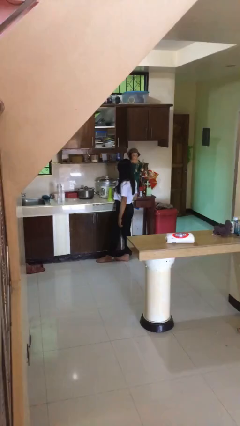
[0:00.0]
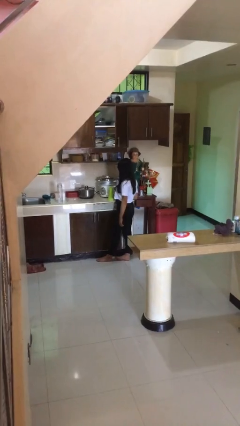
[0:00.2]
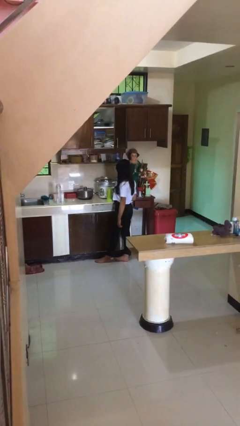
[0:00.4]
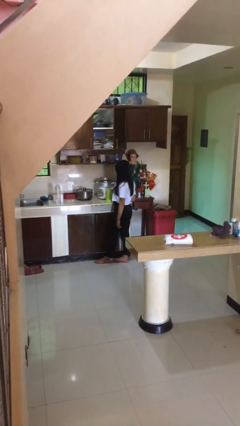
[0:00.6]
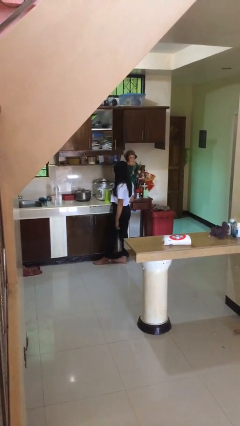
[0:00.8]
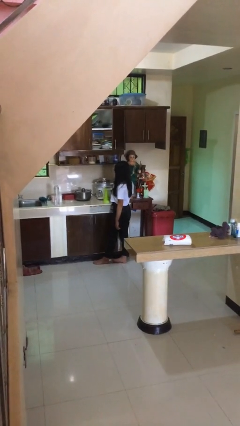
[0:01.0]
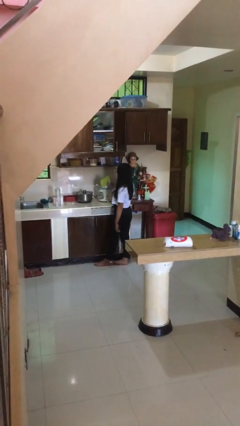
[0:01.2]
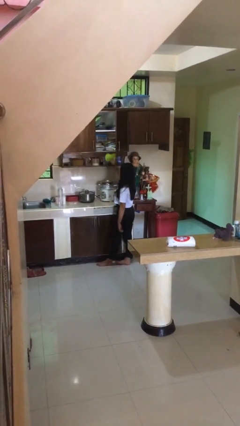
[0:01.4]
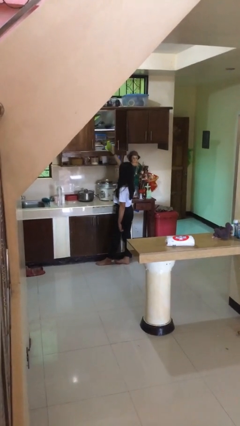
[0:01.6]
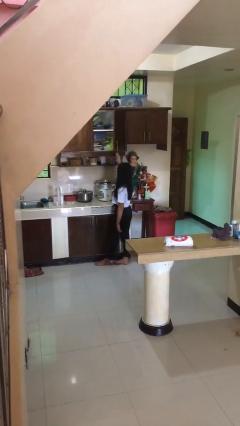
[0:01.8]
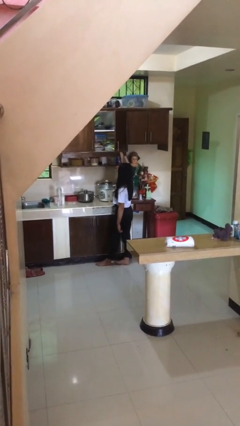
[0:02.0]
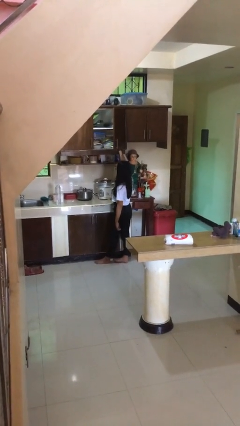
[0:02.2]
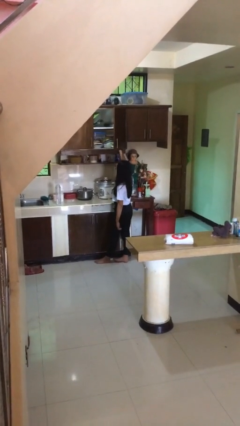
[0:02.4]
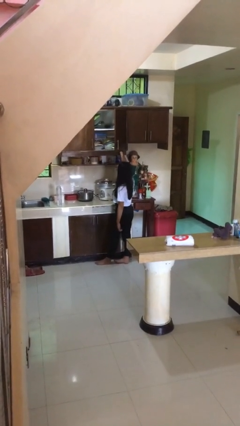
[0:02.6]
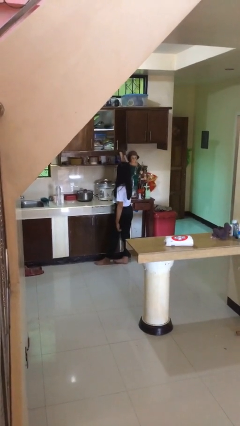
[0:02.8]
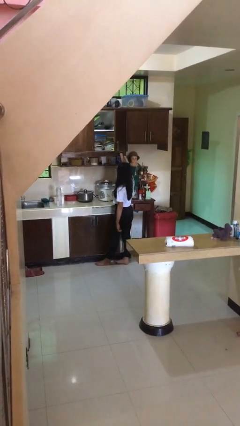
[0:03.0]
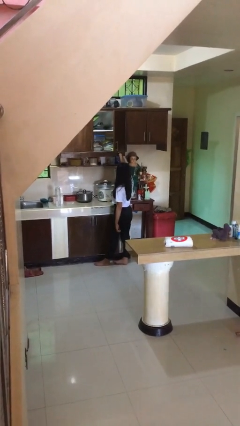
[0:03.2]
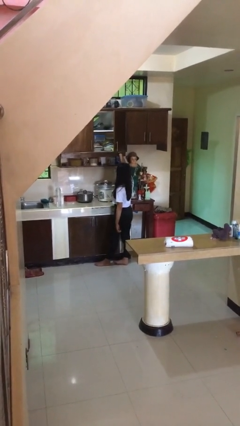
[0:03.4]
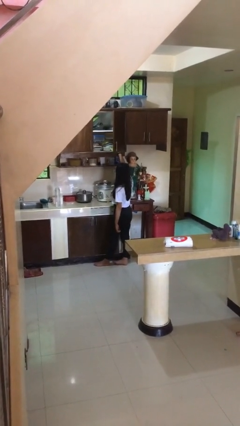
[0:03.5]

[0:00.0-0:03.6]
person puts down object into cabinet

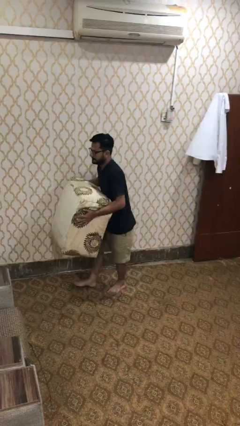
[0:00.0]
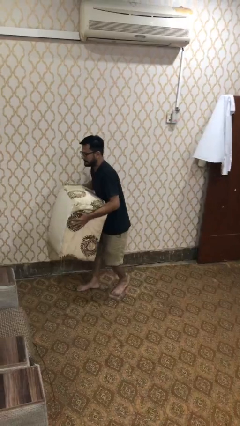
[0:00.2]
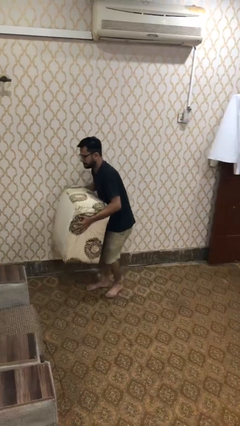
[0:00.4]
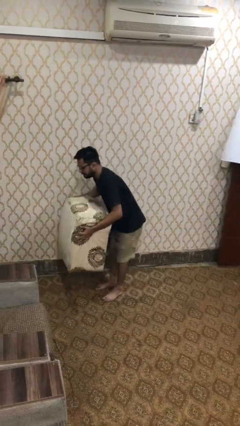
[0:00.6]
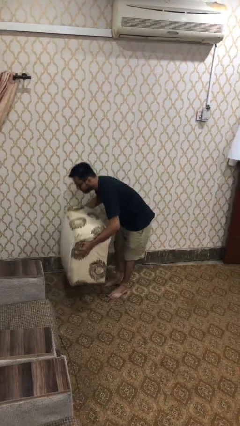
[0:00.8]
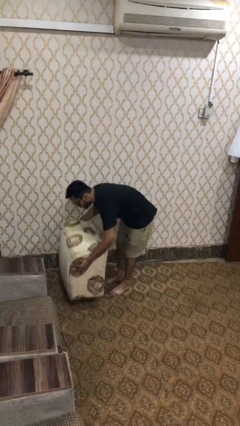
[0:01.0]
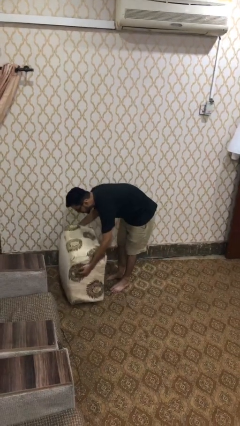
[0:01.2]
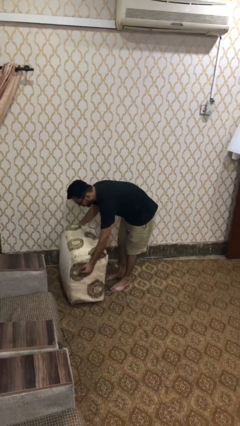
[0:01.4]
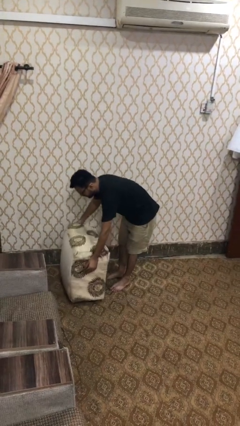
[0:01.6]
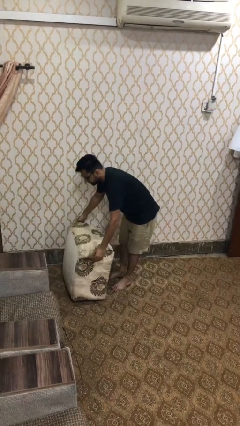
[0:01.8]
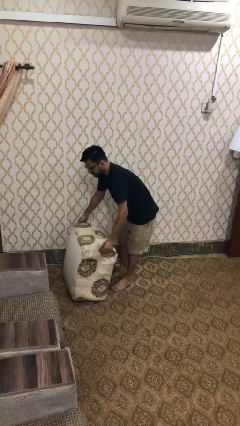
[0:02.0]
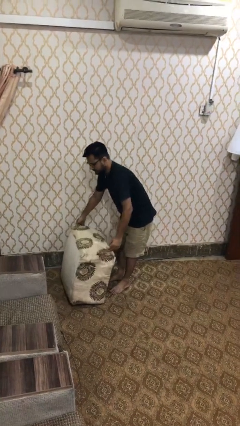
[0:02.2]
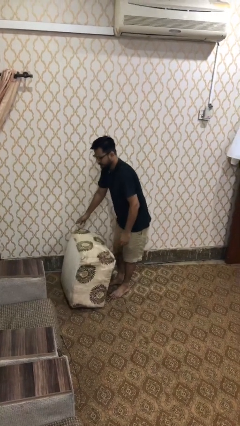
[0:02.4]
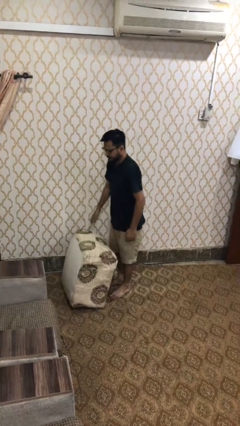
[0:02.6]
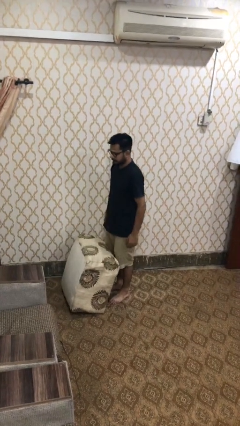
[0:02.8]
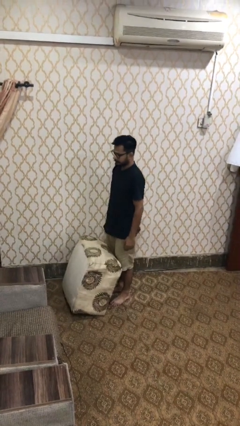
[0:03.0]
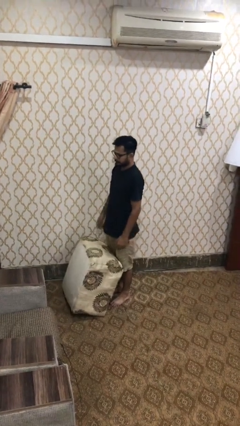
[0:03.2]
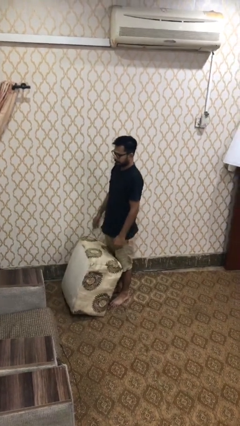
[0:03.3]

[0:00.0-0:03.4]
person puts down object on floor

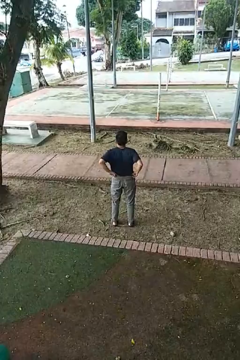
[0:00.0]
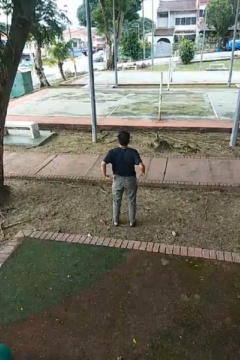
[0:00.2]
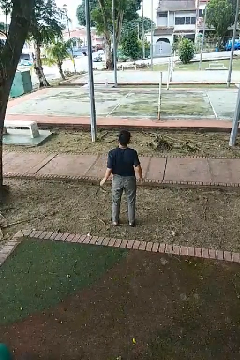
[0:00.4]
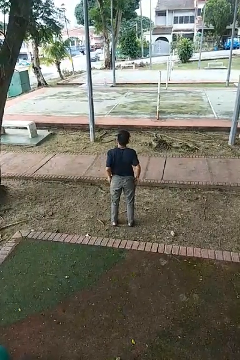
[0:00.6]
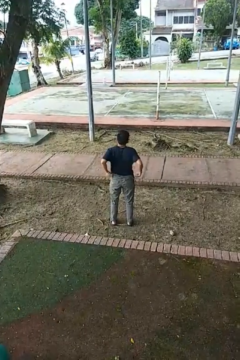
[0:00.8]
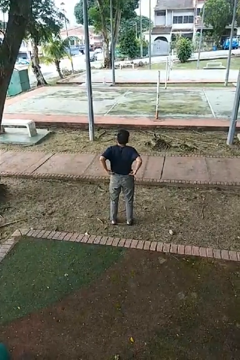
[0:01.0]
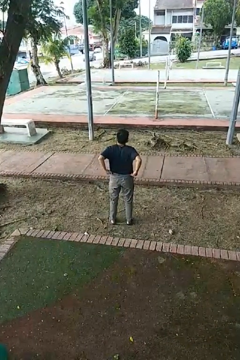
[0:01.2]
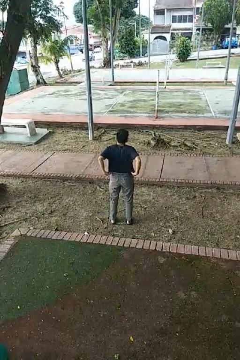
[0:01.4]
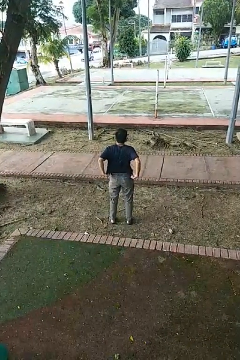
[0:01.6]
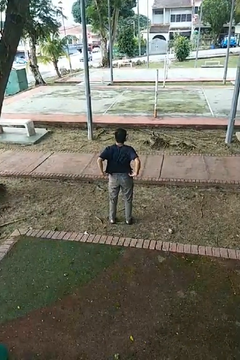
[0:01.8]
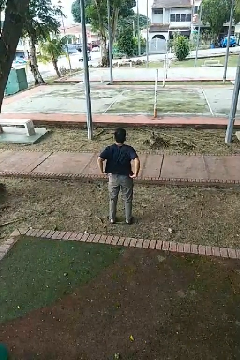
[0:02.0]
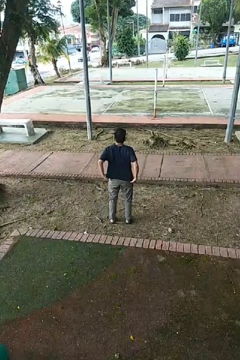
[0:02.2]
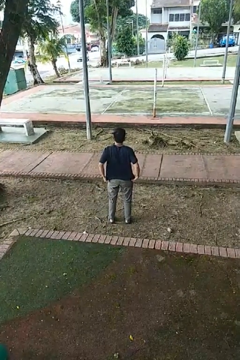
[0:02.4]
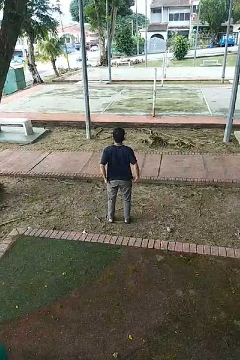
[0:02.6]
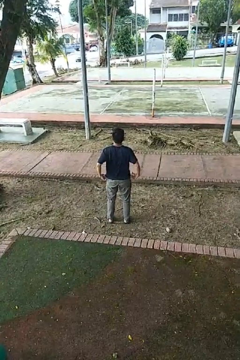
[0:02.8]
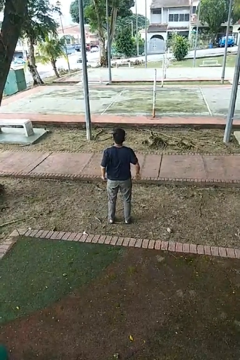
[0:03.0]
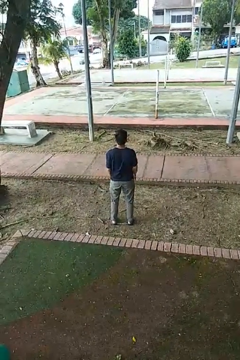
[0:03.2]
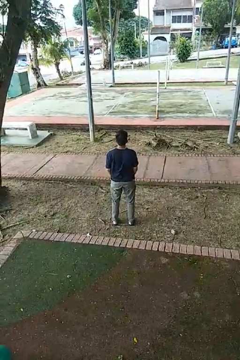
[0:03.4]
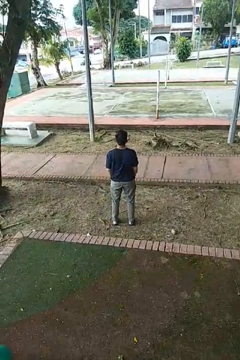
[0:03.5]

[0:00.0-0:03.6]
person untucks shirt

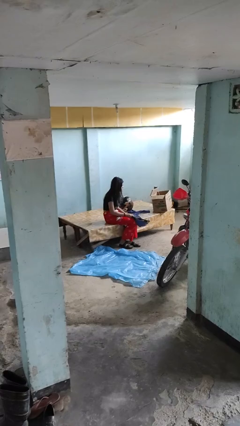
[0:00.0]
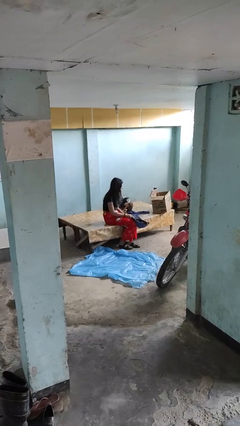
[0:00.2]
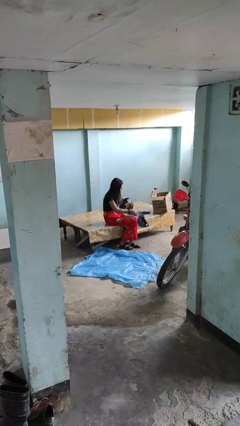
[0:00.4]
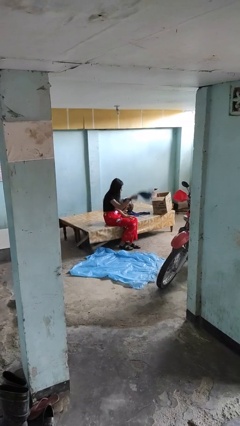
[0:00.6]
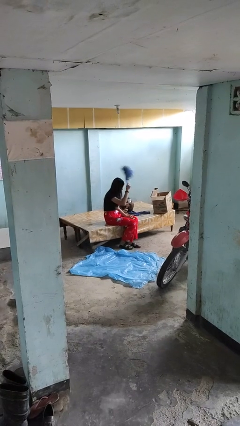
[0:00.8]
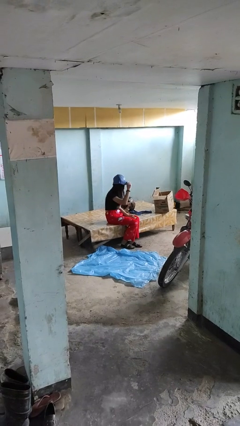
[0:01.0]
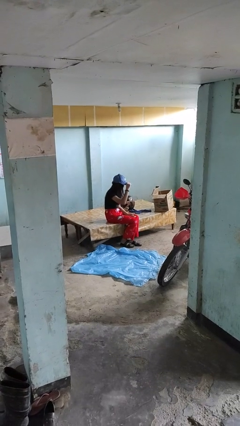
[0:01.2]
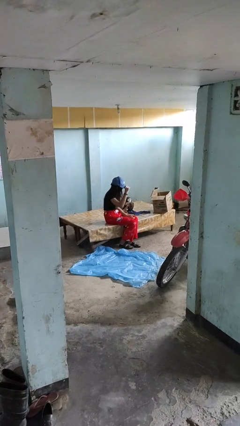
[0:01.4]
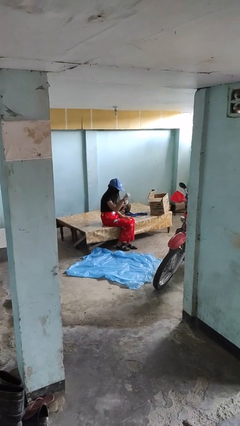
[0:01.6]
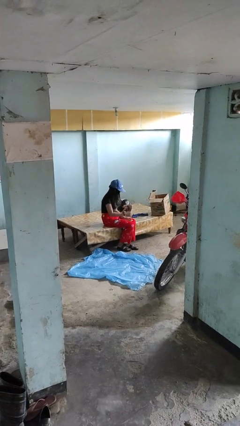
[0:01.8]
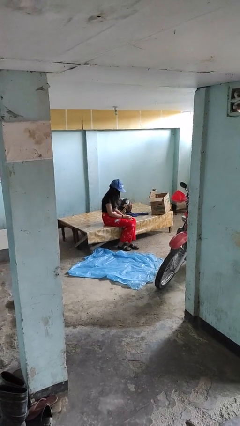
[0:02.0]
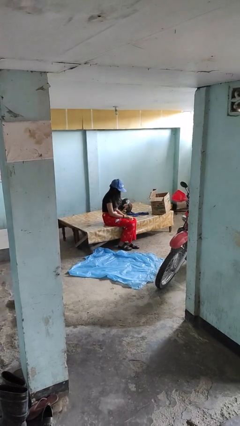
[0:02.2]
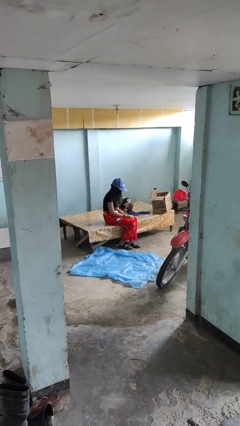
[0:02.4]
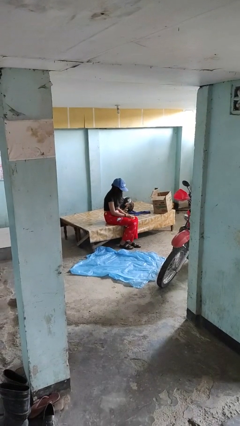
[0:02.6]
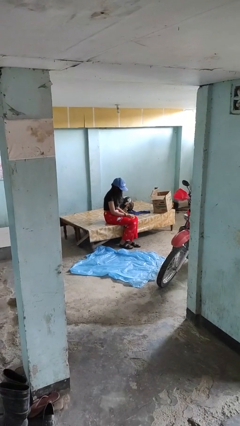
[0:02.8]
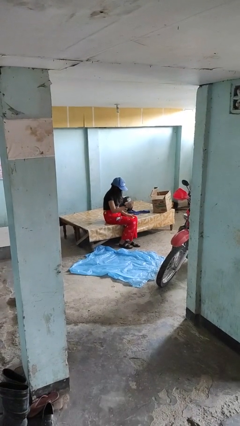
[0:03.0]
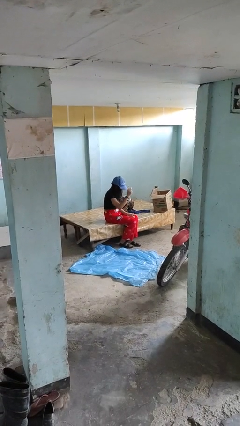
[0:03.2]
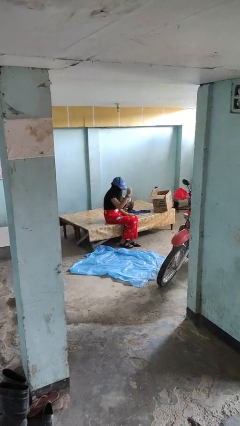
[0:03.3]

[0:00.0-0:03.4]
person puts on hat

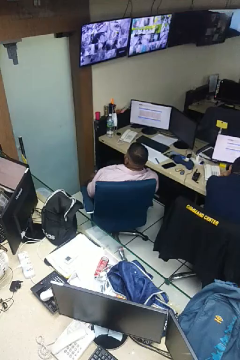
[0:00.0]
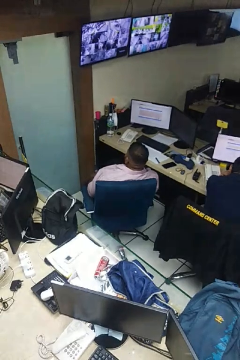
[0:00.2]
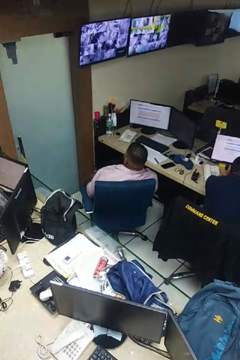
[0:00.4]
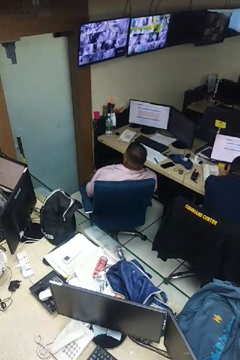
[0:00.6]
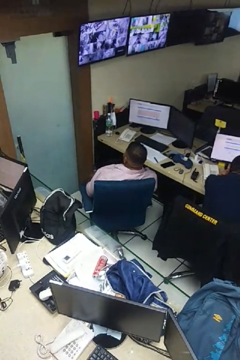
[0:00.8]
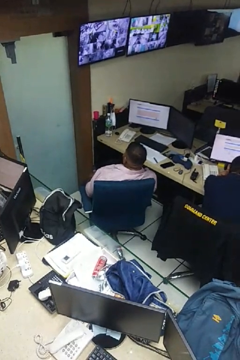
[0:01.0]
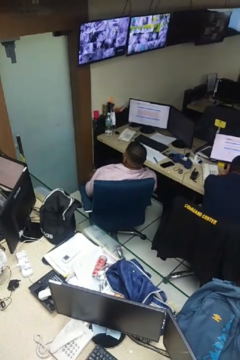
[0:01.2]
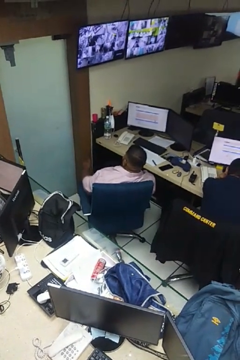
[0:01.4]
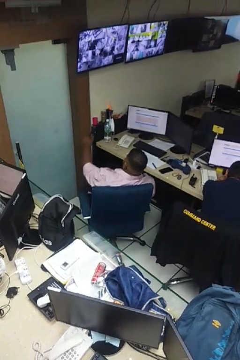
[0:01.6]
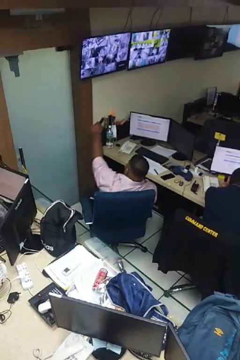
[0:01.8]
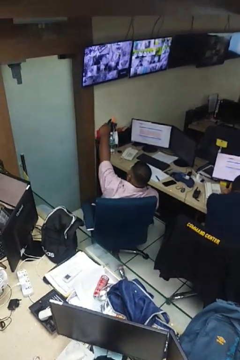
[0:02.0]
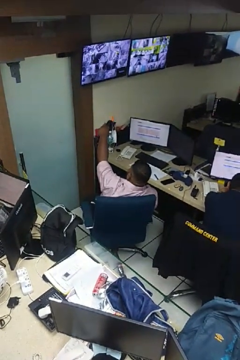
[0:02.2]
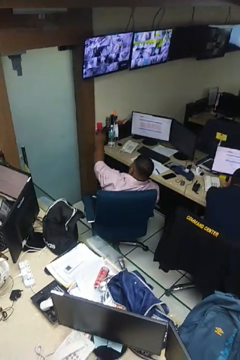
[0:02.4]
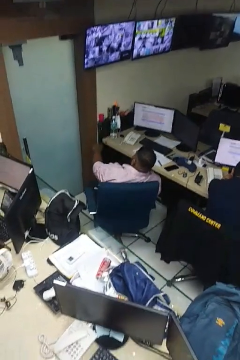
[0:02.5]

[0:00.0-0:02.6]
person uses television remote

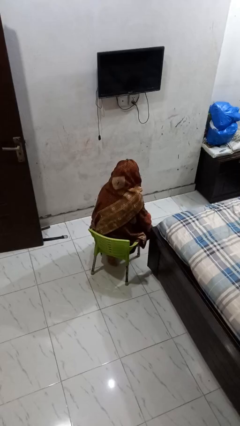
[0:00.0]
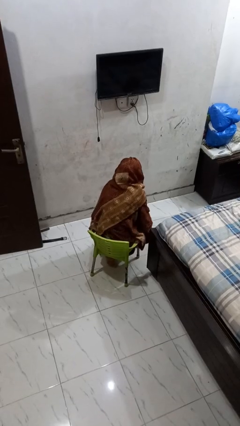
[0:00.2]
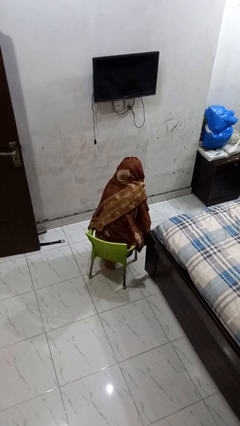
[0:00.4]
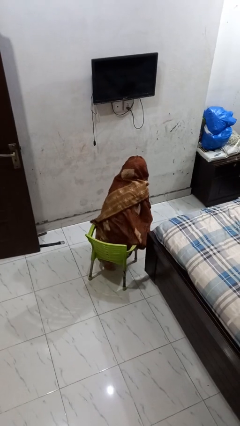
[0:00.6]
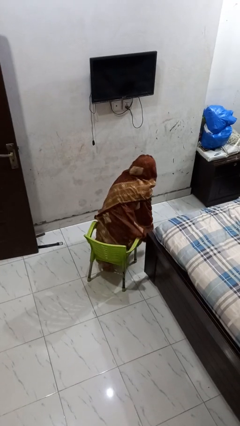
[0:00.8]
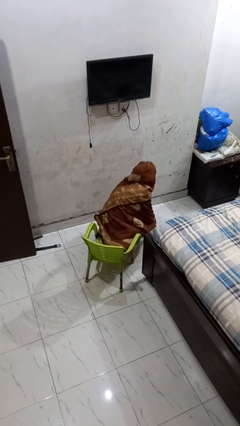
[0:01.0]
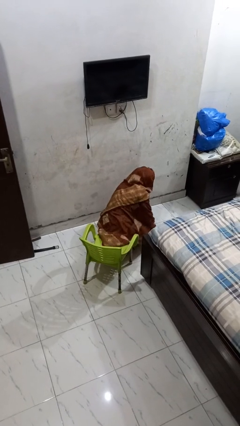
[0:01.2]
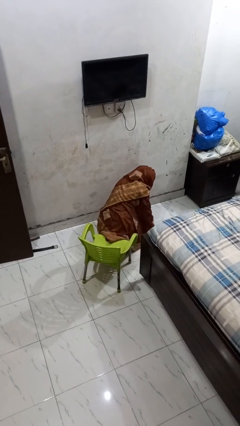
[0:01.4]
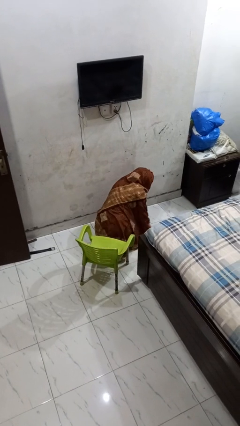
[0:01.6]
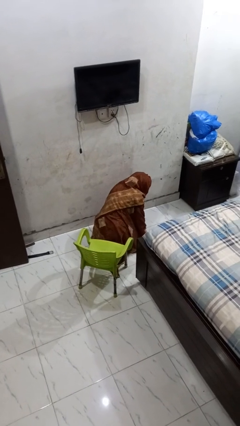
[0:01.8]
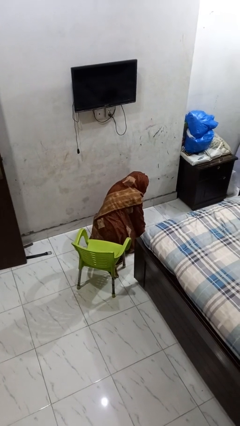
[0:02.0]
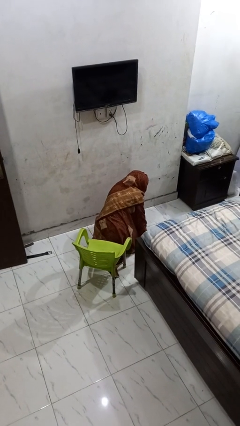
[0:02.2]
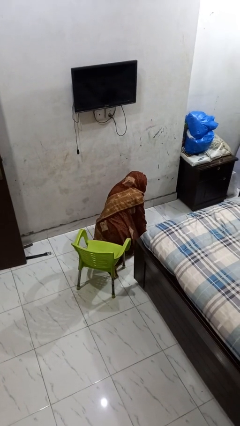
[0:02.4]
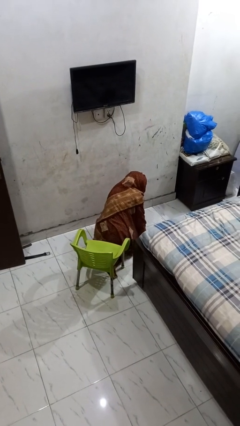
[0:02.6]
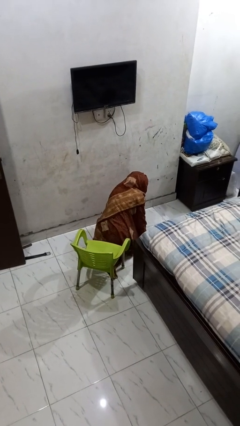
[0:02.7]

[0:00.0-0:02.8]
person falls from chair
